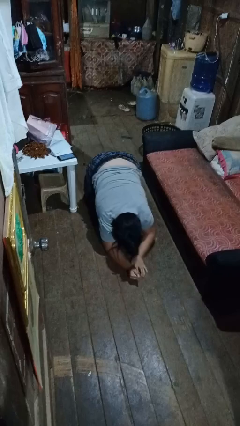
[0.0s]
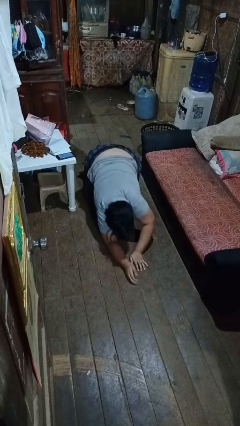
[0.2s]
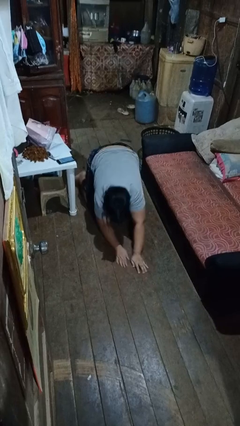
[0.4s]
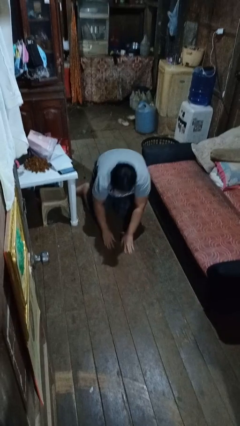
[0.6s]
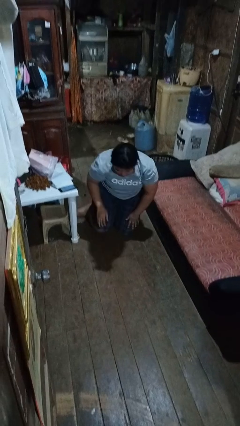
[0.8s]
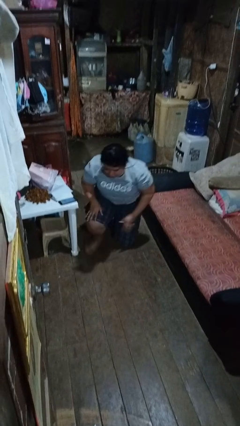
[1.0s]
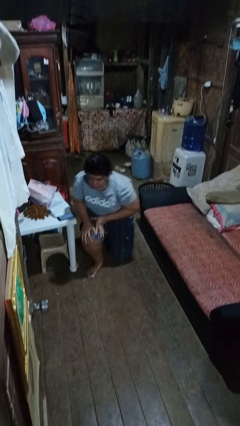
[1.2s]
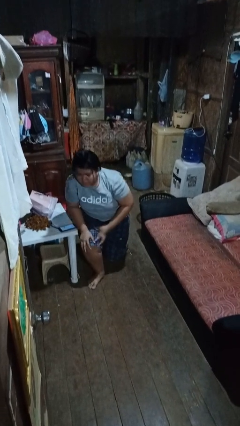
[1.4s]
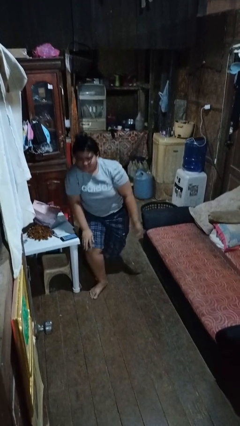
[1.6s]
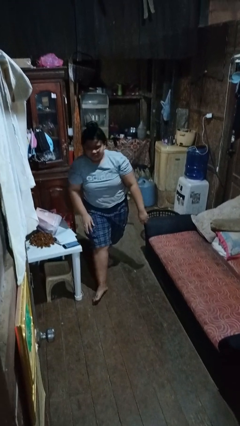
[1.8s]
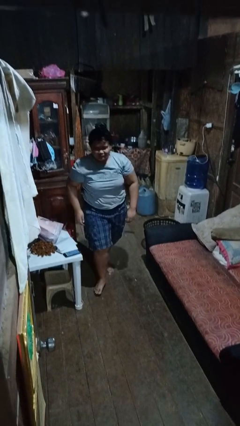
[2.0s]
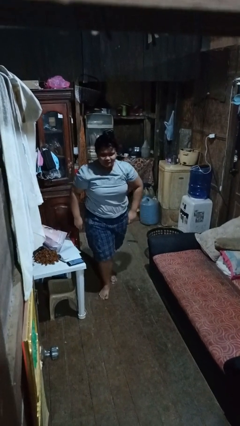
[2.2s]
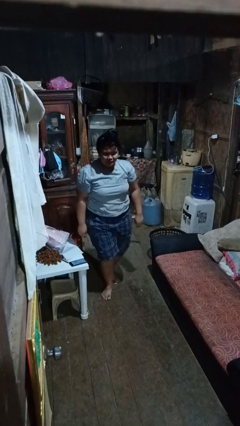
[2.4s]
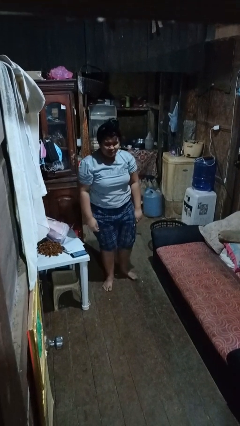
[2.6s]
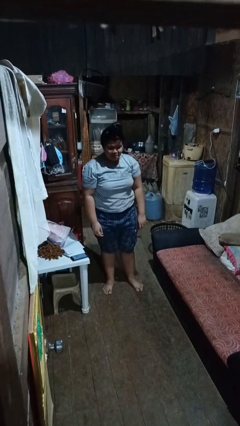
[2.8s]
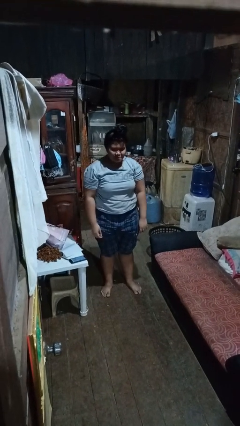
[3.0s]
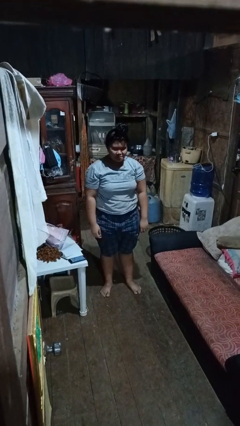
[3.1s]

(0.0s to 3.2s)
person stands up from floor

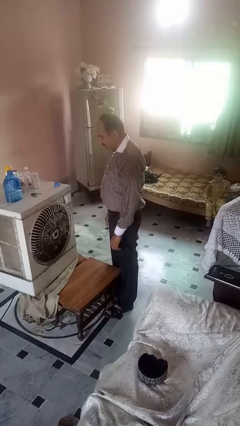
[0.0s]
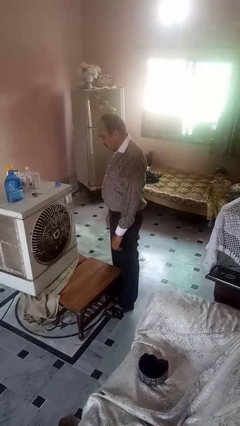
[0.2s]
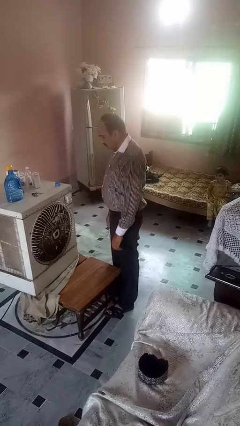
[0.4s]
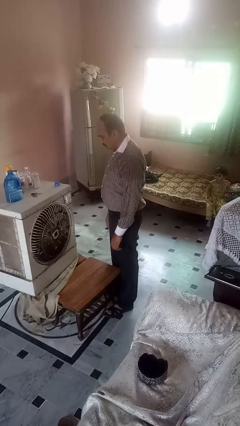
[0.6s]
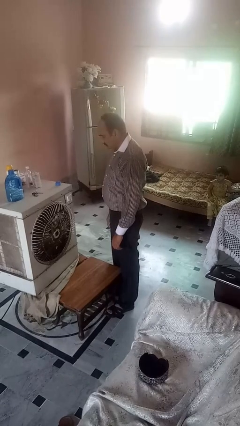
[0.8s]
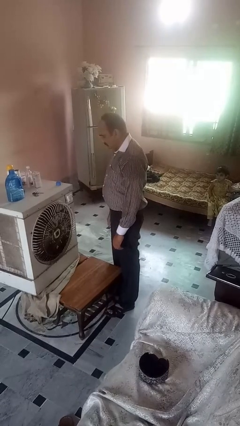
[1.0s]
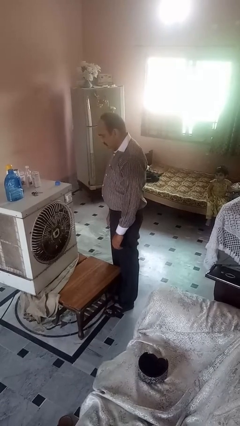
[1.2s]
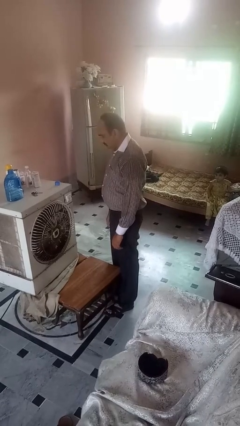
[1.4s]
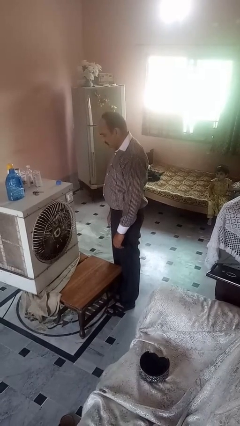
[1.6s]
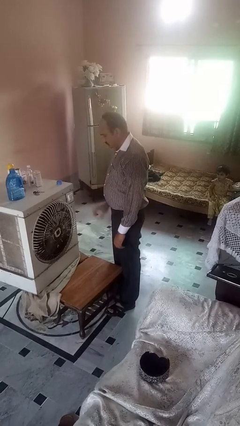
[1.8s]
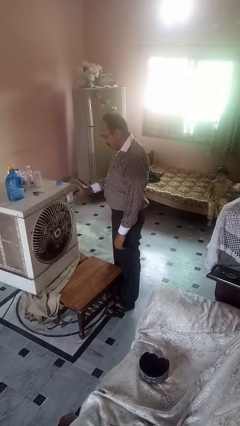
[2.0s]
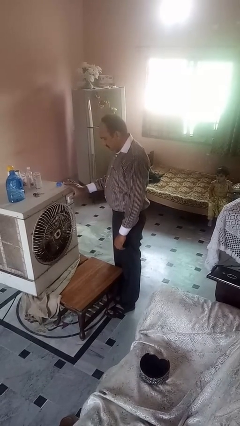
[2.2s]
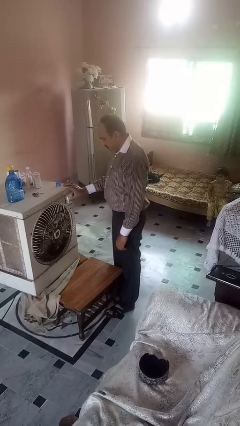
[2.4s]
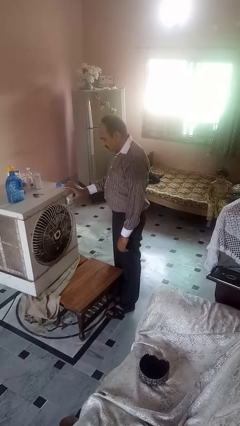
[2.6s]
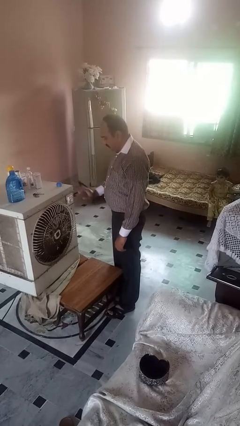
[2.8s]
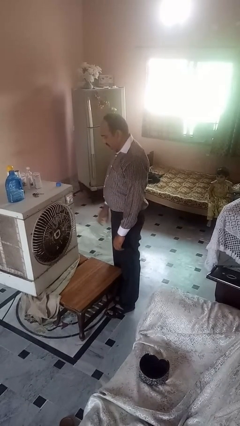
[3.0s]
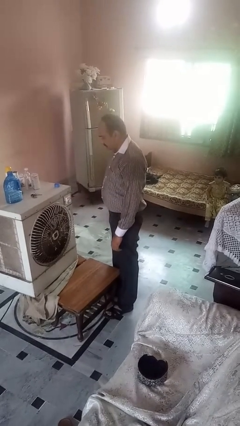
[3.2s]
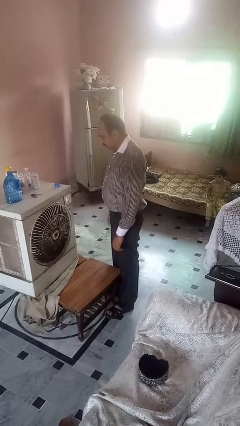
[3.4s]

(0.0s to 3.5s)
person turns on fan

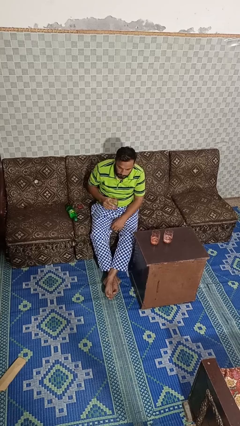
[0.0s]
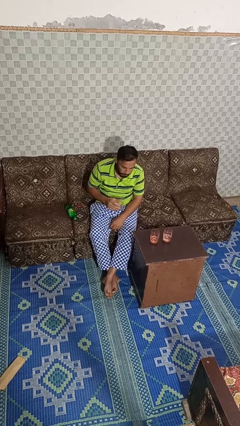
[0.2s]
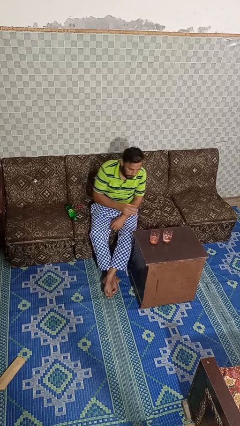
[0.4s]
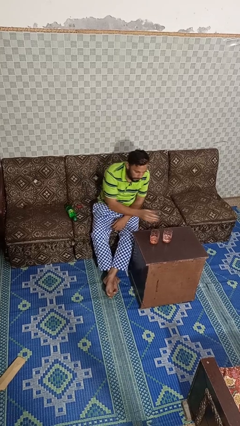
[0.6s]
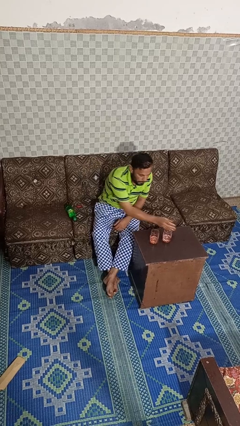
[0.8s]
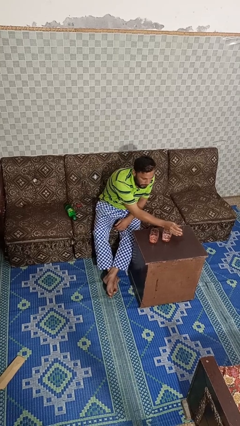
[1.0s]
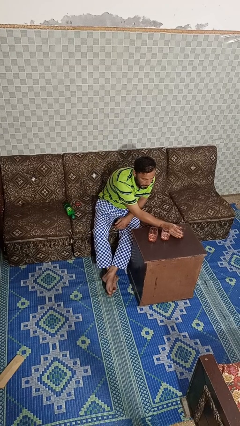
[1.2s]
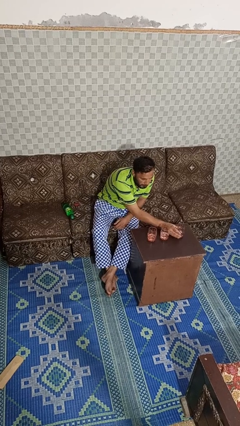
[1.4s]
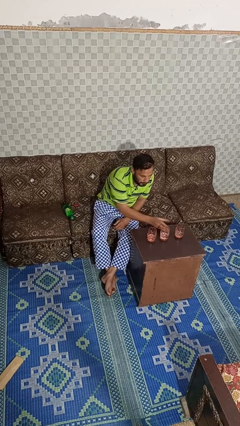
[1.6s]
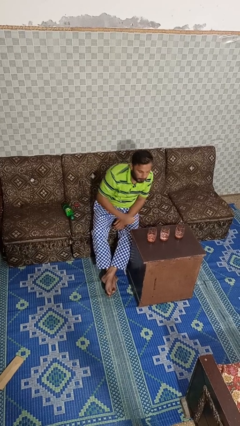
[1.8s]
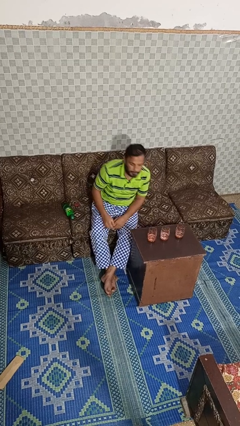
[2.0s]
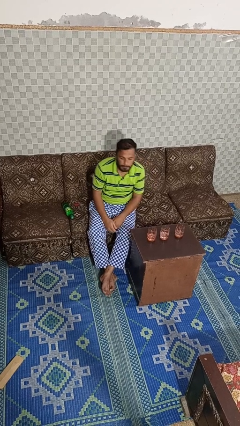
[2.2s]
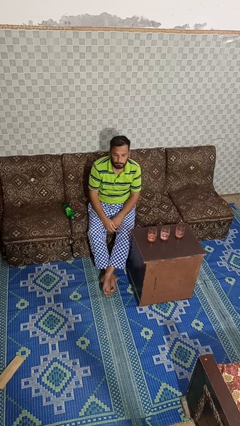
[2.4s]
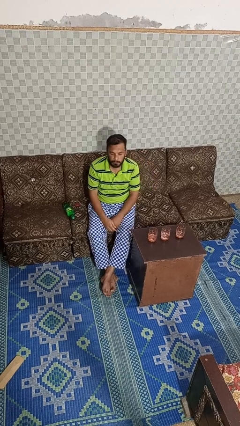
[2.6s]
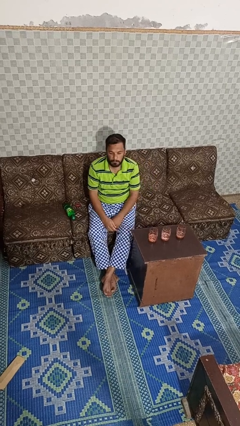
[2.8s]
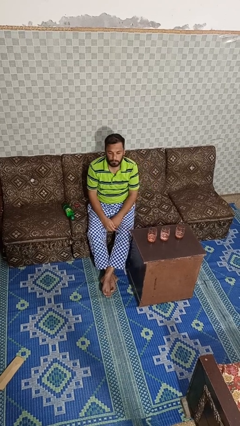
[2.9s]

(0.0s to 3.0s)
person puts down object on table

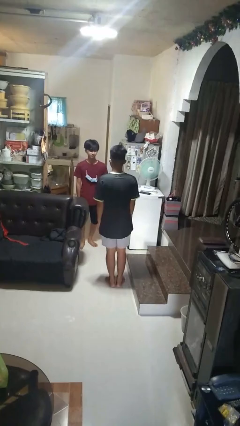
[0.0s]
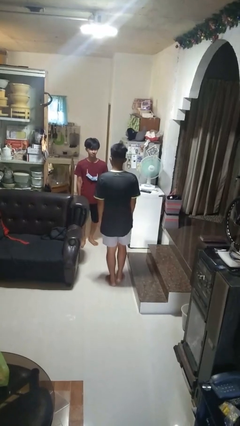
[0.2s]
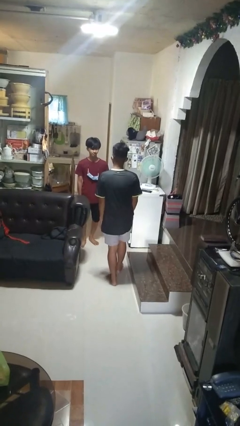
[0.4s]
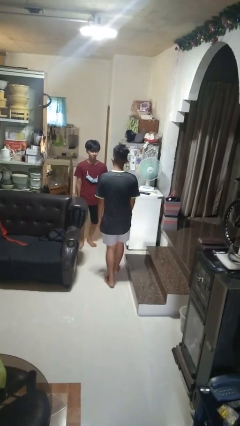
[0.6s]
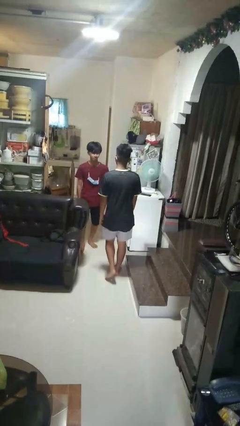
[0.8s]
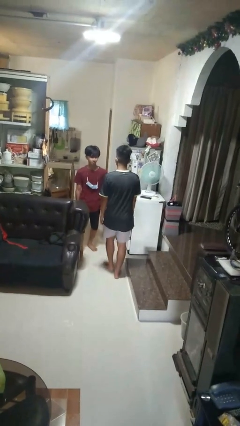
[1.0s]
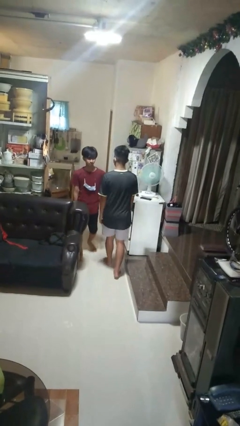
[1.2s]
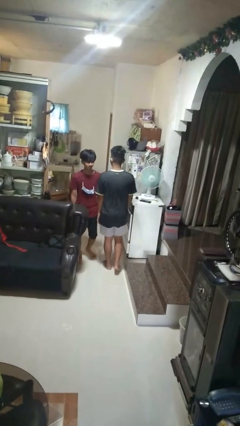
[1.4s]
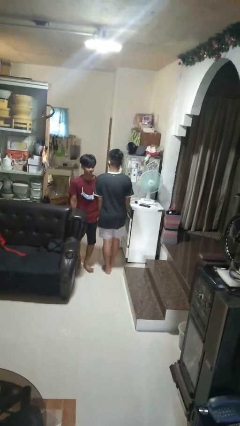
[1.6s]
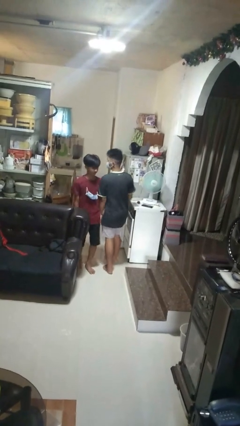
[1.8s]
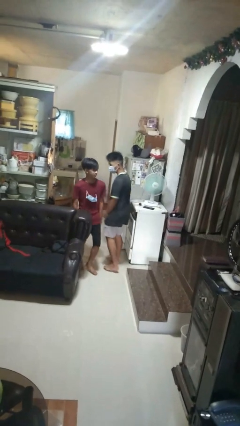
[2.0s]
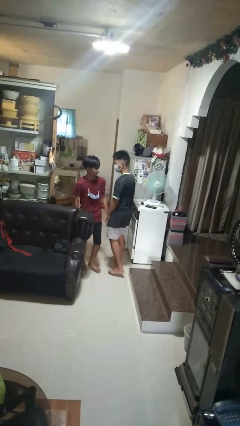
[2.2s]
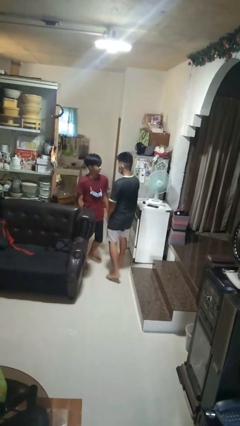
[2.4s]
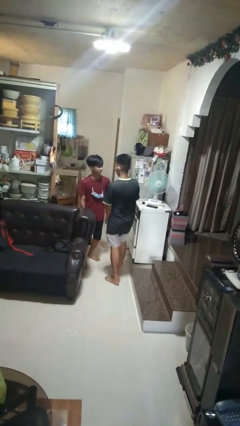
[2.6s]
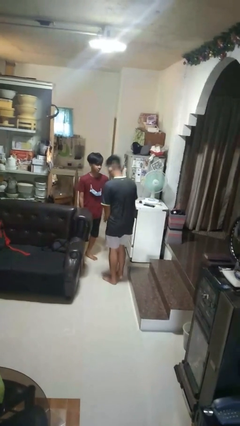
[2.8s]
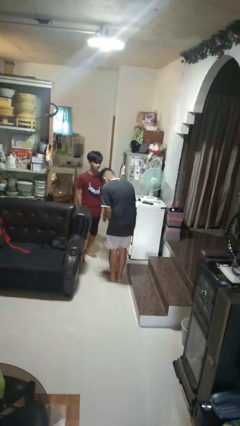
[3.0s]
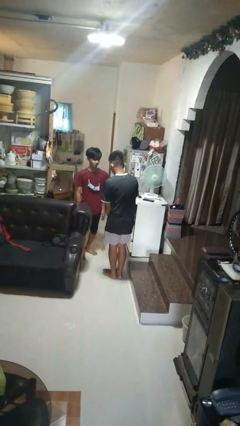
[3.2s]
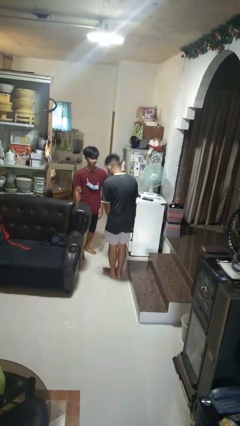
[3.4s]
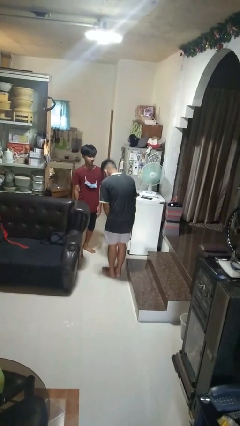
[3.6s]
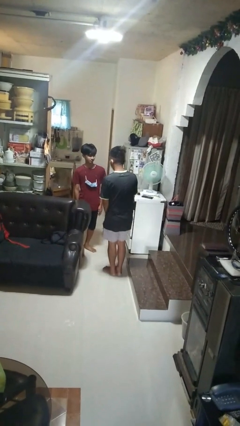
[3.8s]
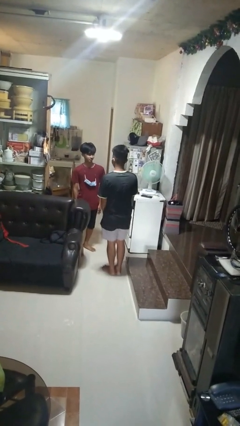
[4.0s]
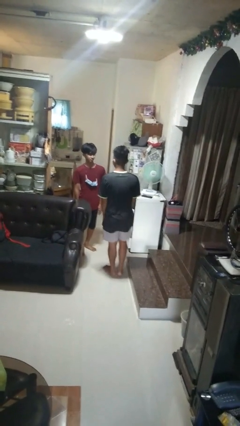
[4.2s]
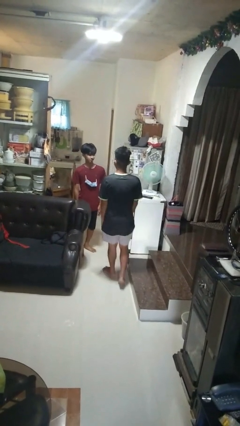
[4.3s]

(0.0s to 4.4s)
person bumps into person

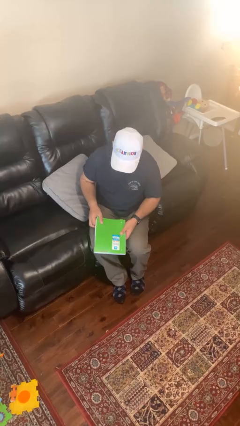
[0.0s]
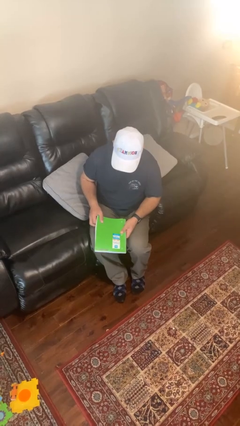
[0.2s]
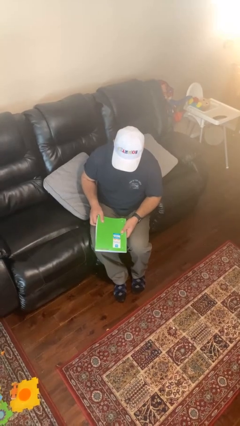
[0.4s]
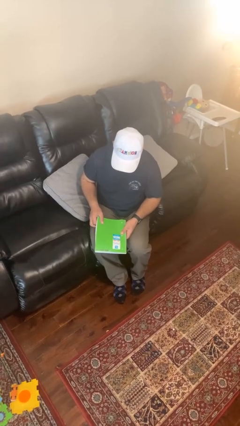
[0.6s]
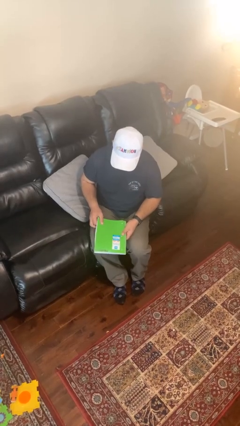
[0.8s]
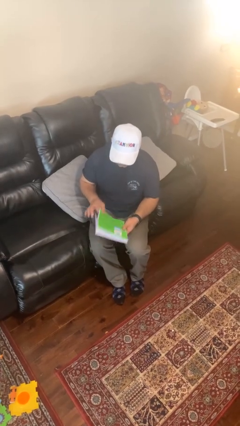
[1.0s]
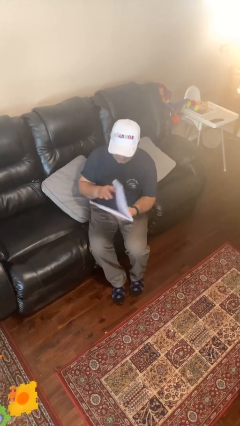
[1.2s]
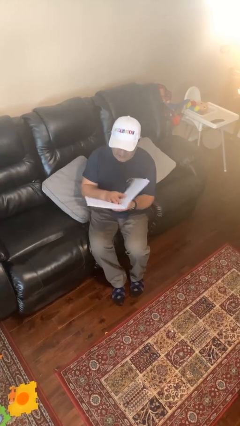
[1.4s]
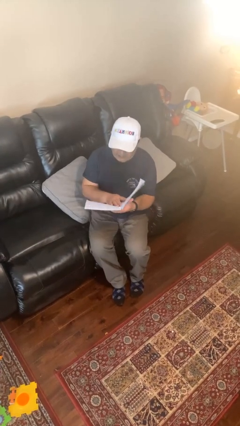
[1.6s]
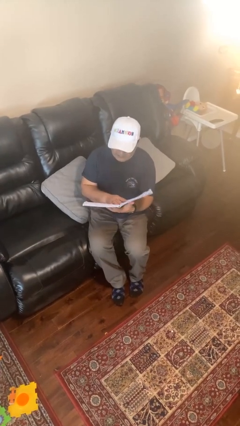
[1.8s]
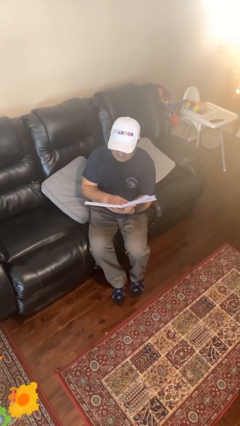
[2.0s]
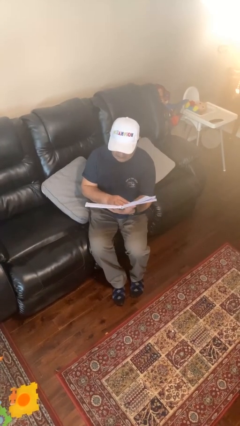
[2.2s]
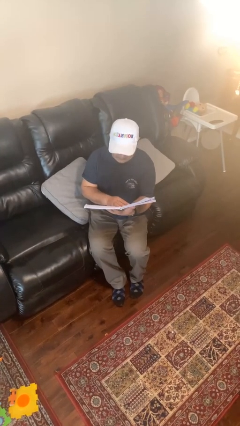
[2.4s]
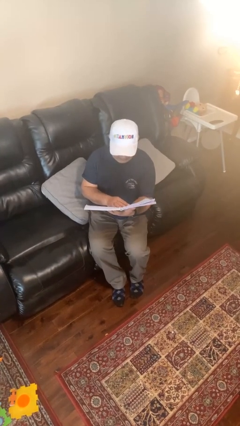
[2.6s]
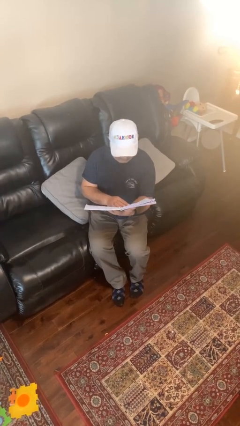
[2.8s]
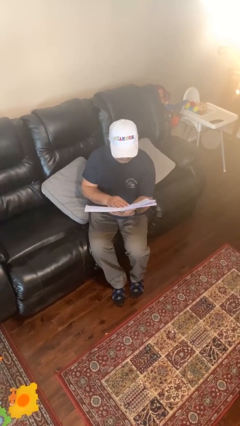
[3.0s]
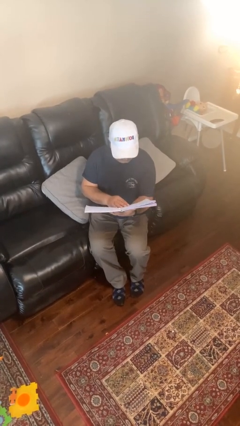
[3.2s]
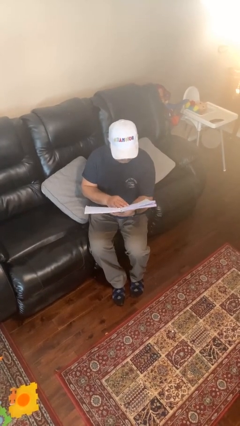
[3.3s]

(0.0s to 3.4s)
person reads document

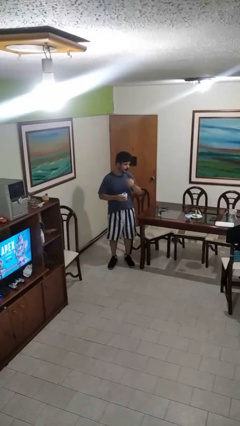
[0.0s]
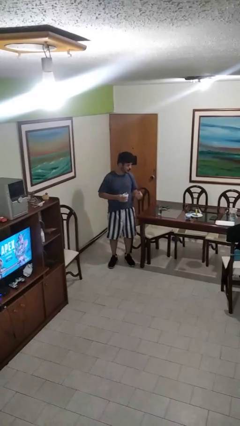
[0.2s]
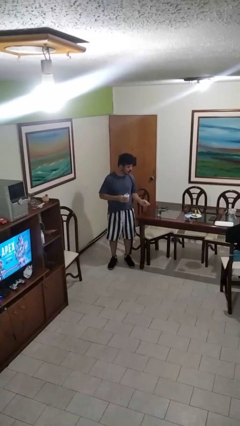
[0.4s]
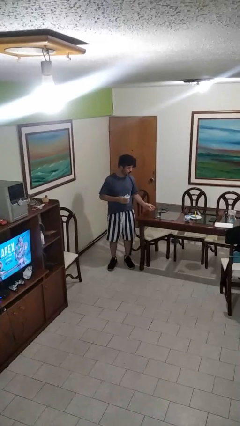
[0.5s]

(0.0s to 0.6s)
person takes medicine pills
